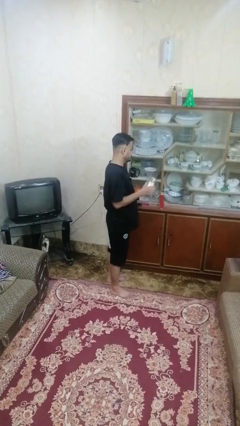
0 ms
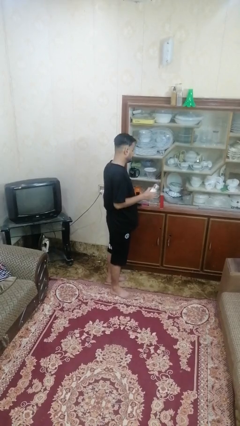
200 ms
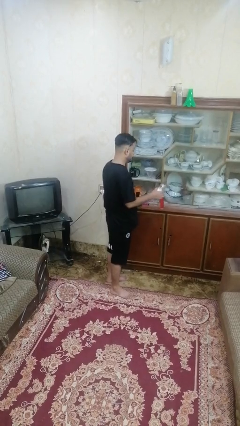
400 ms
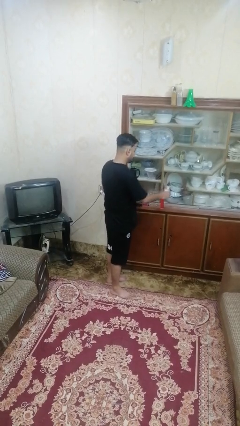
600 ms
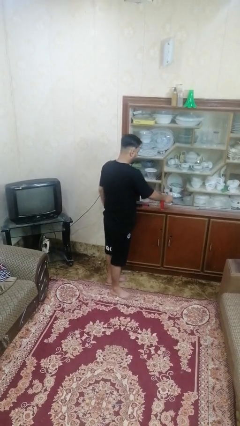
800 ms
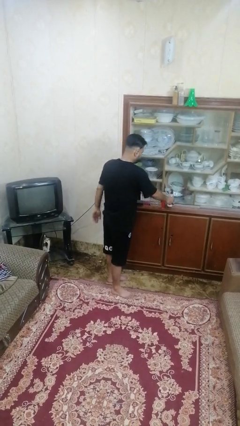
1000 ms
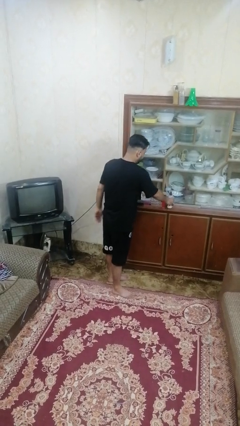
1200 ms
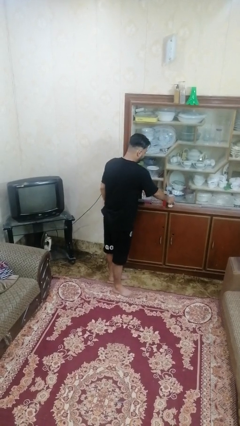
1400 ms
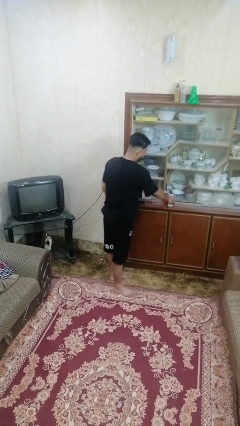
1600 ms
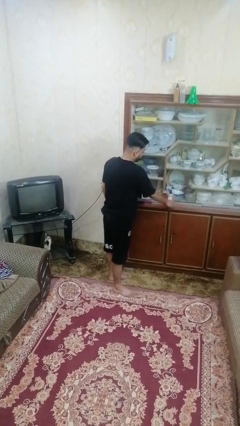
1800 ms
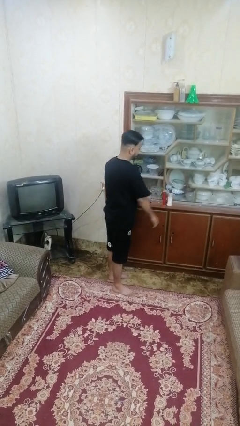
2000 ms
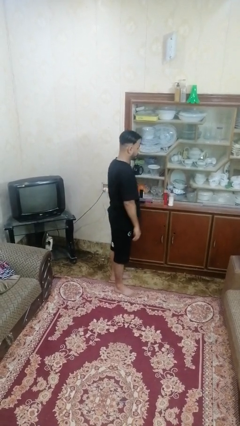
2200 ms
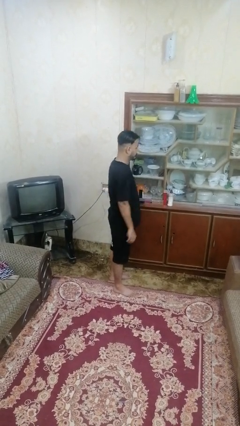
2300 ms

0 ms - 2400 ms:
person puts down object on shelf

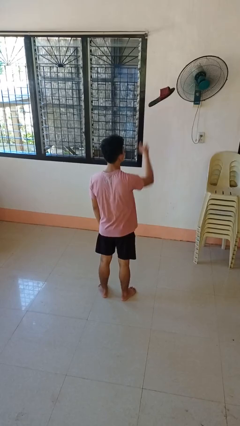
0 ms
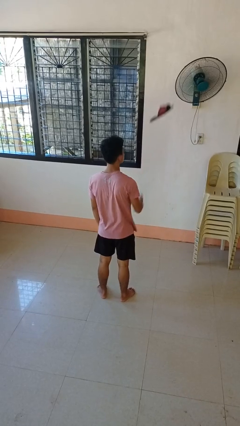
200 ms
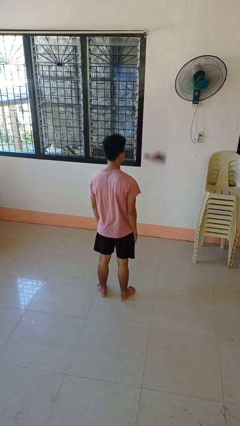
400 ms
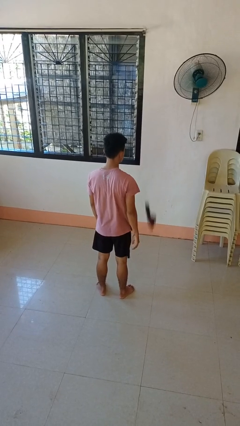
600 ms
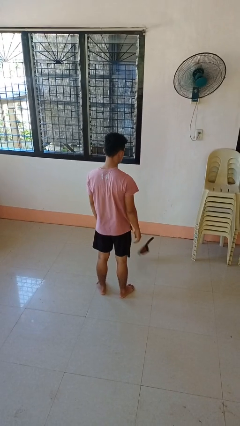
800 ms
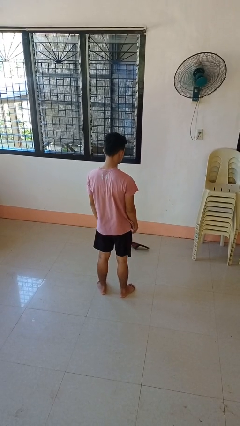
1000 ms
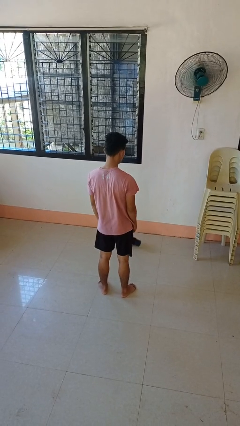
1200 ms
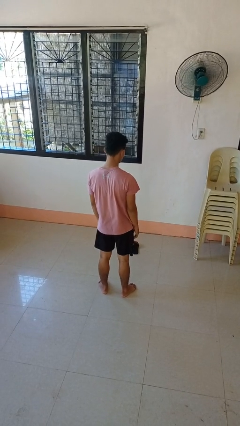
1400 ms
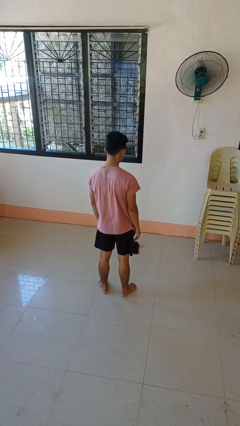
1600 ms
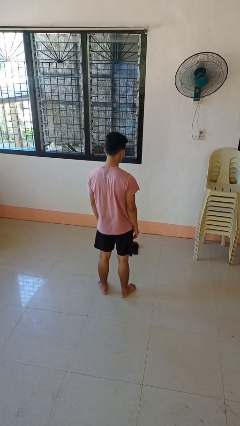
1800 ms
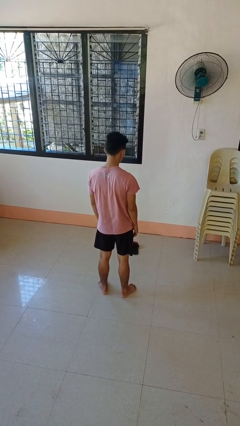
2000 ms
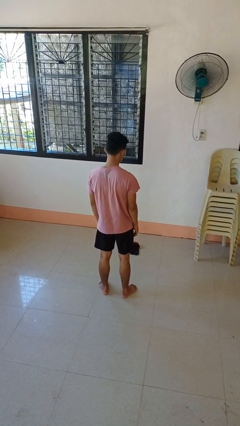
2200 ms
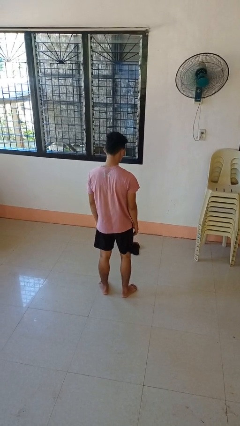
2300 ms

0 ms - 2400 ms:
person throws object into air

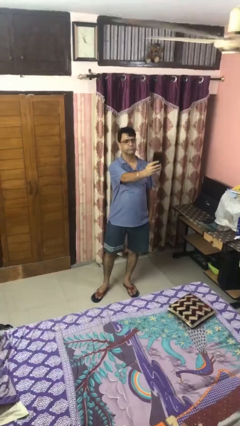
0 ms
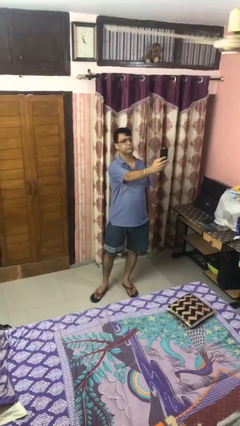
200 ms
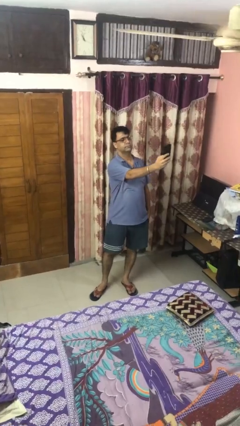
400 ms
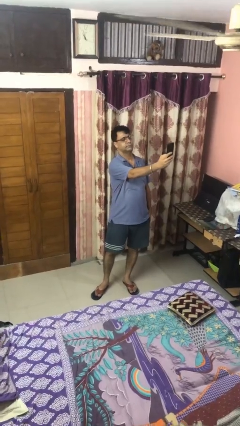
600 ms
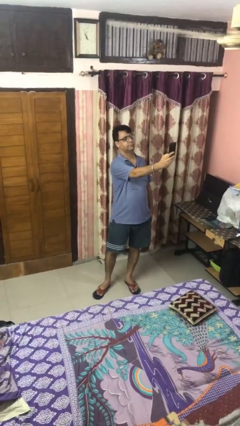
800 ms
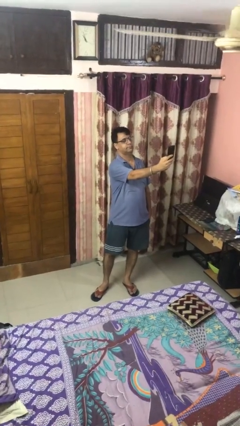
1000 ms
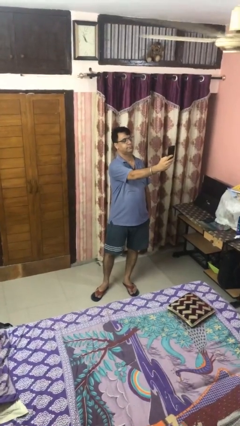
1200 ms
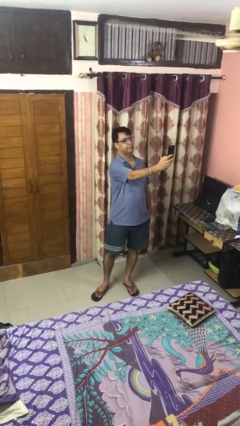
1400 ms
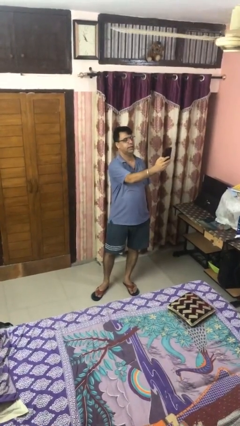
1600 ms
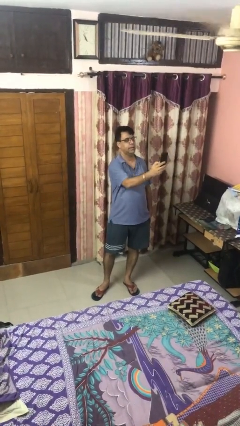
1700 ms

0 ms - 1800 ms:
person takes selfie

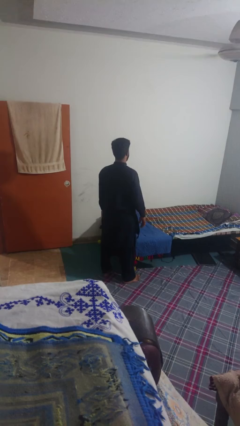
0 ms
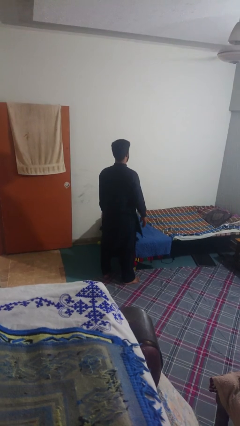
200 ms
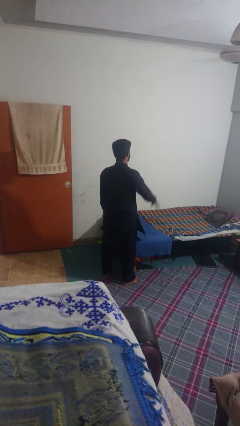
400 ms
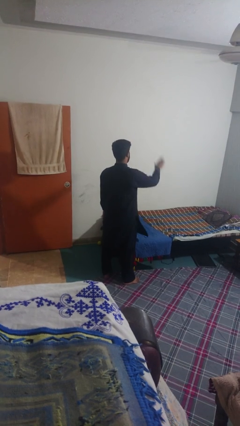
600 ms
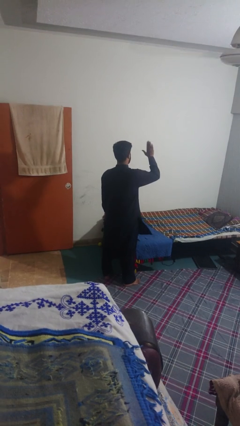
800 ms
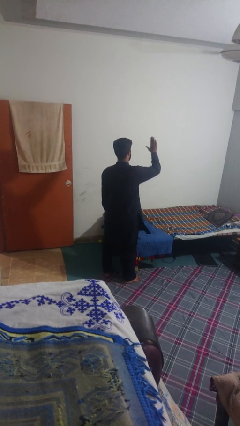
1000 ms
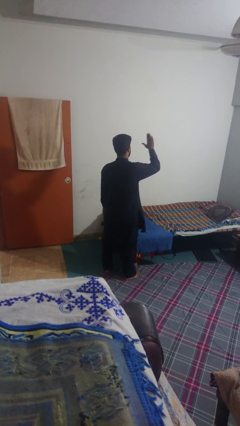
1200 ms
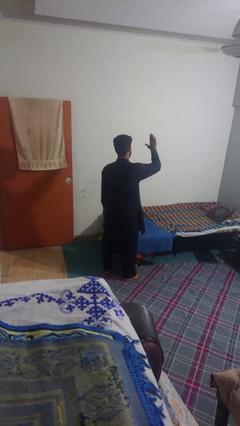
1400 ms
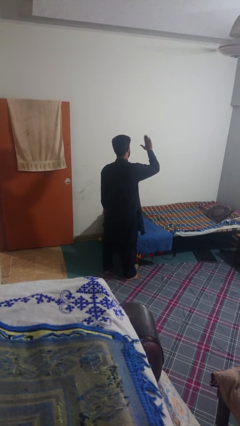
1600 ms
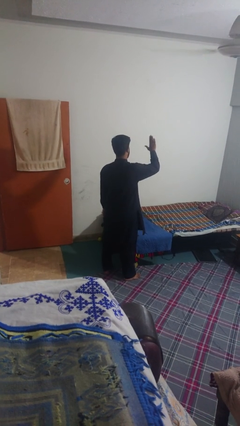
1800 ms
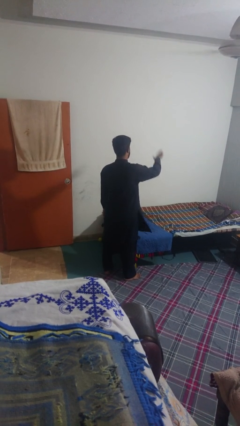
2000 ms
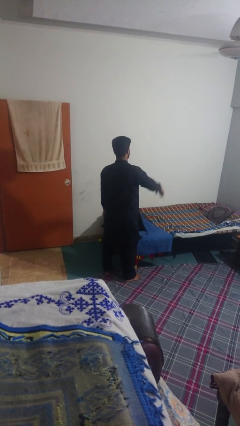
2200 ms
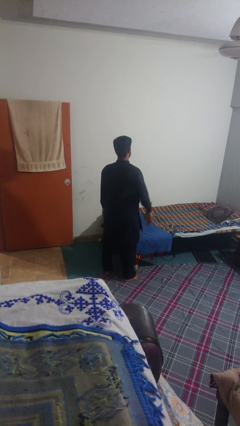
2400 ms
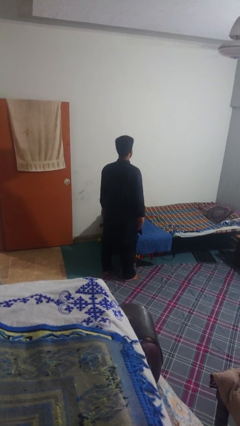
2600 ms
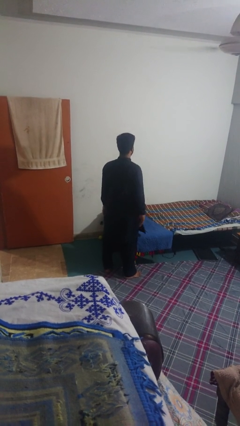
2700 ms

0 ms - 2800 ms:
person gestures stop

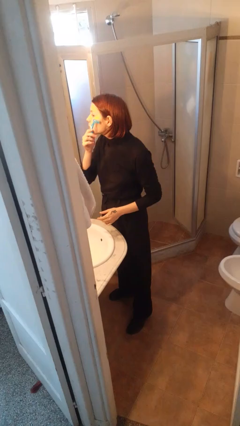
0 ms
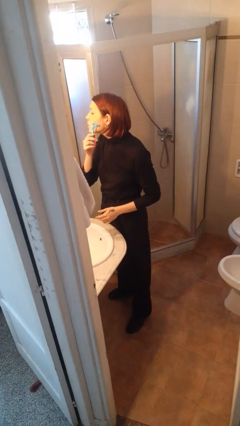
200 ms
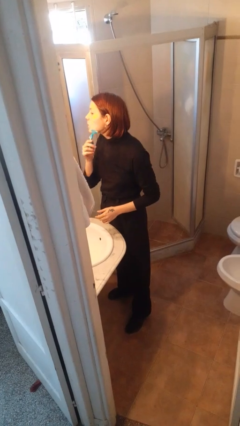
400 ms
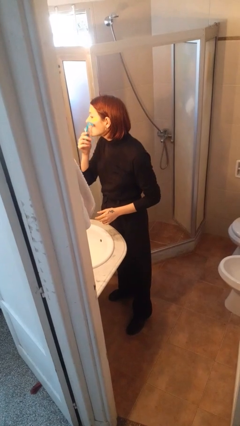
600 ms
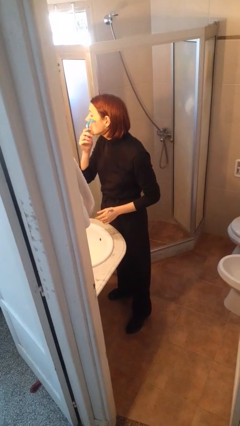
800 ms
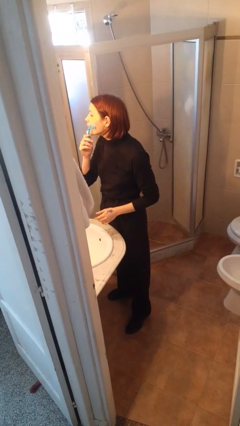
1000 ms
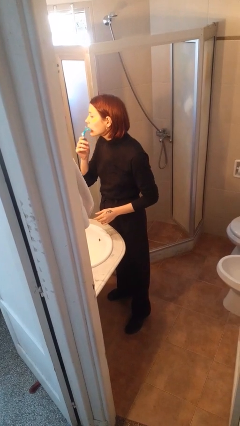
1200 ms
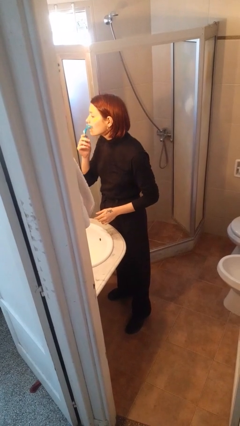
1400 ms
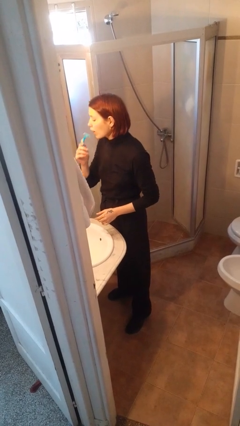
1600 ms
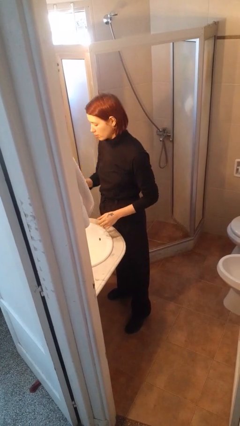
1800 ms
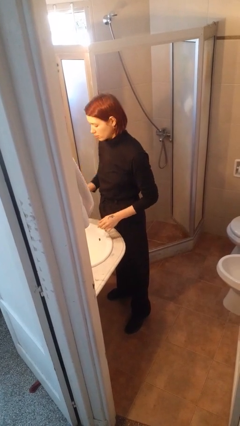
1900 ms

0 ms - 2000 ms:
person shaves face

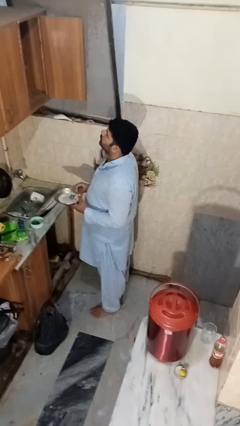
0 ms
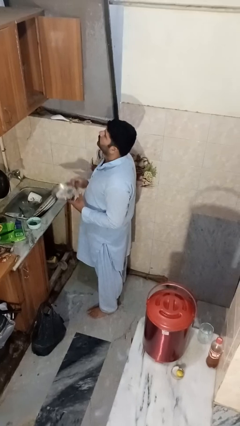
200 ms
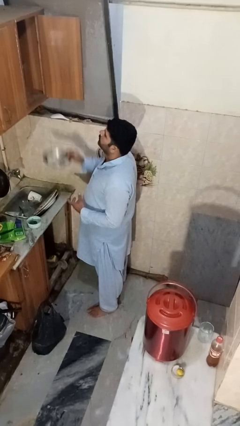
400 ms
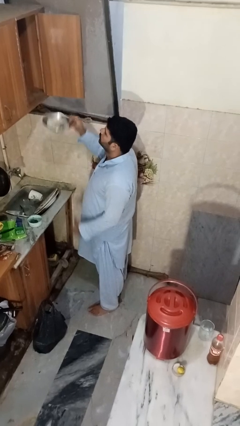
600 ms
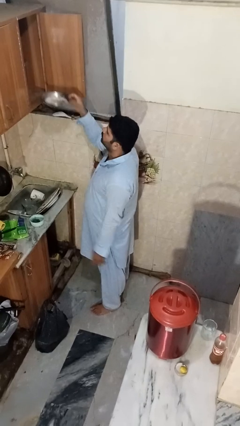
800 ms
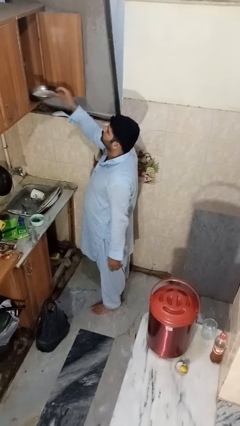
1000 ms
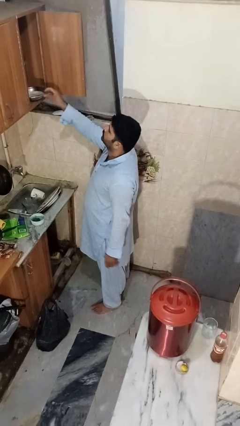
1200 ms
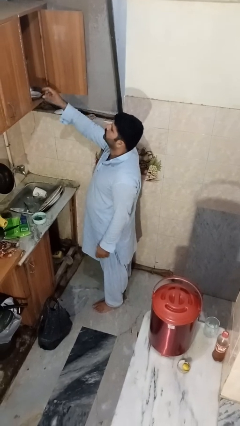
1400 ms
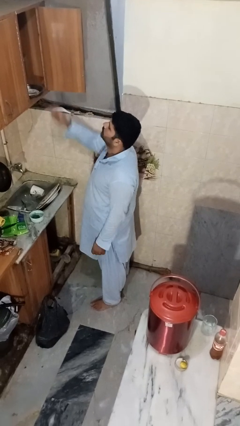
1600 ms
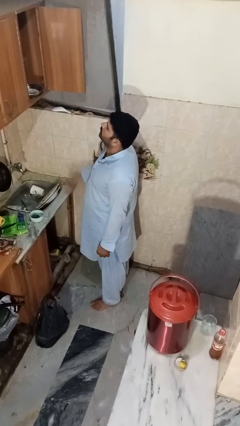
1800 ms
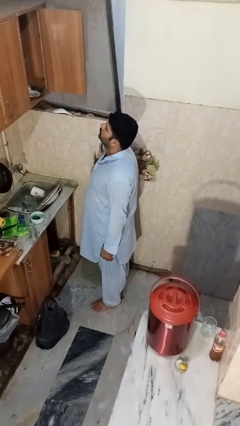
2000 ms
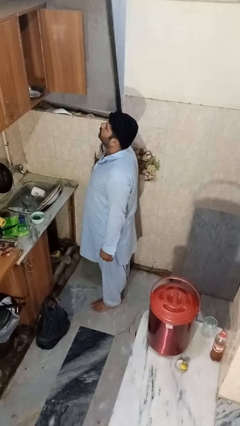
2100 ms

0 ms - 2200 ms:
person puts object in cabinet

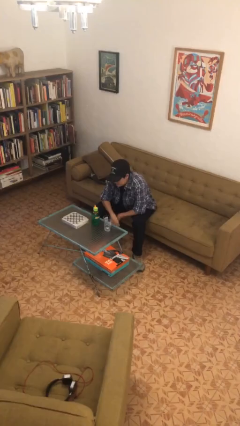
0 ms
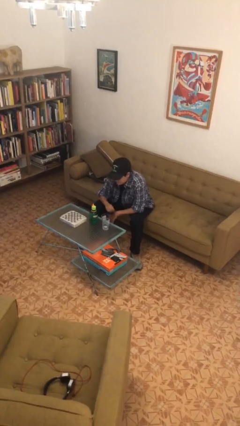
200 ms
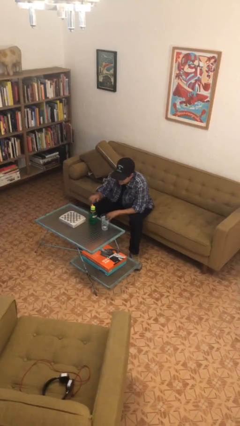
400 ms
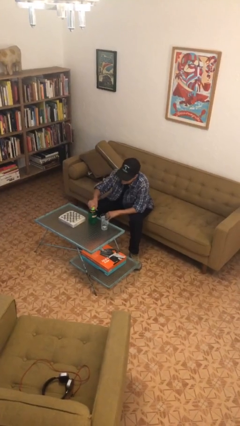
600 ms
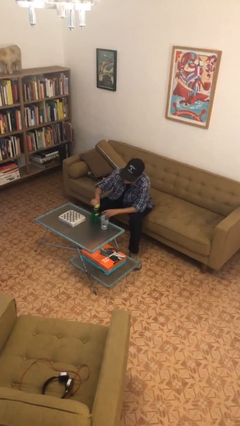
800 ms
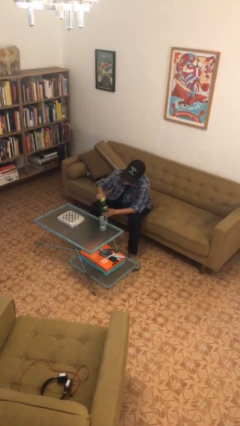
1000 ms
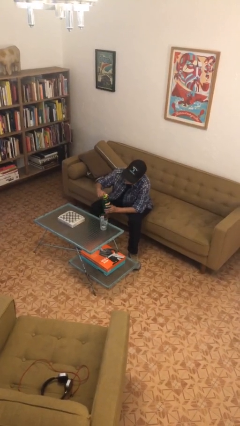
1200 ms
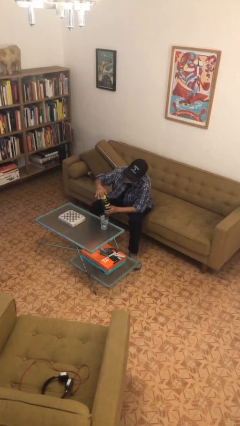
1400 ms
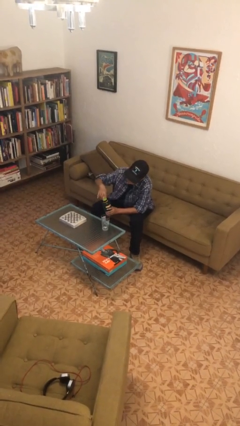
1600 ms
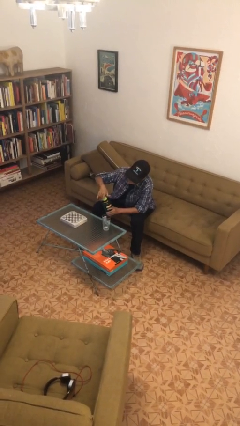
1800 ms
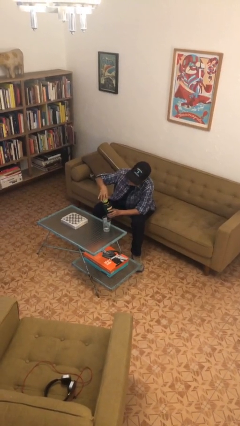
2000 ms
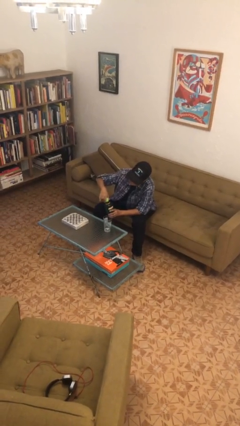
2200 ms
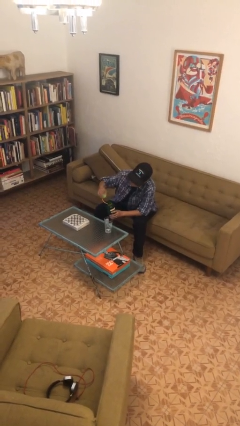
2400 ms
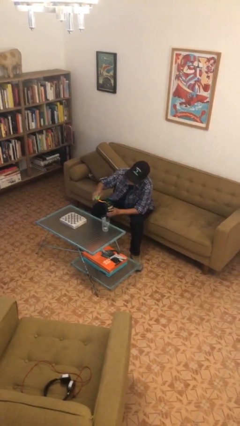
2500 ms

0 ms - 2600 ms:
person unscrews lid from bottle

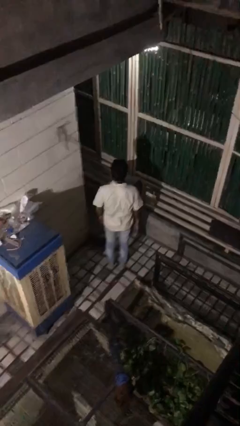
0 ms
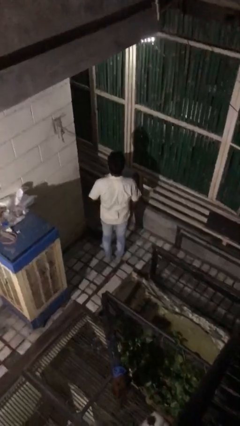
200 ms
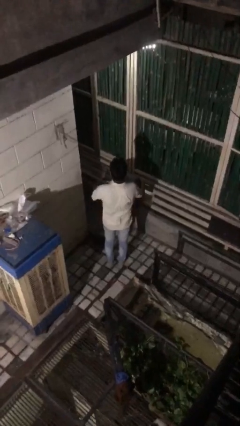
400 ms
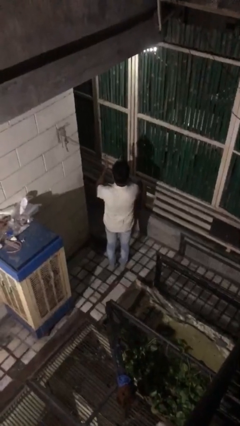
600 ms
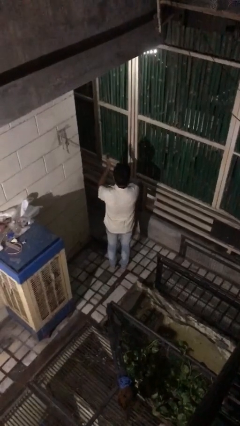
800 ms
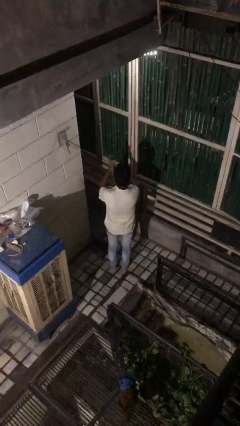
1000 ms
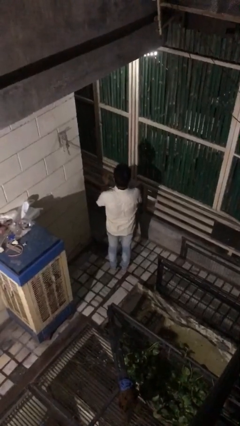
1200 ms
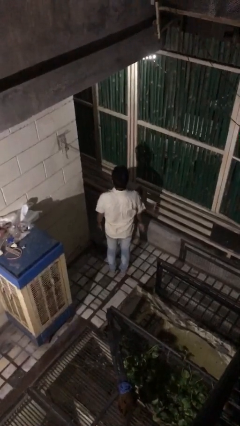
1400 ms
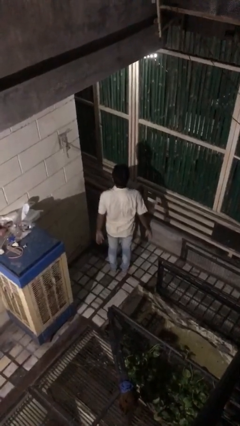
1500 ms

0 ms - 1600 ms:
person claps hands
